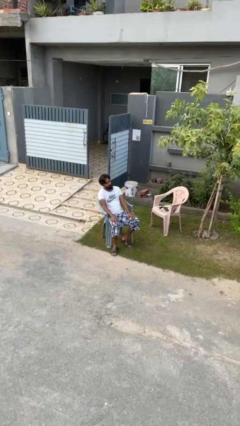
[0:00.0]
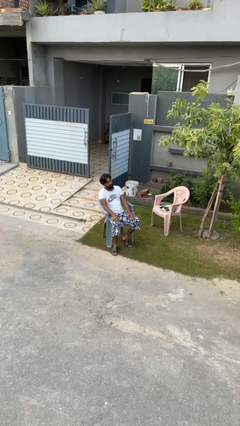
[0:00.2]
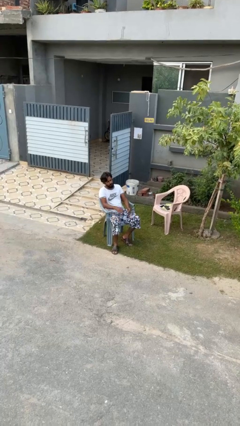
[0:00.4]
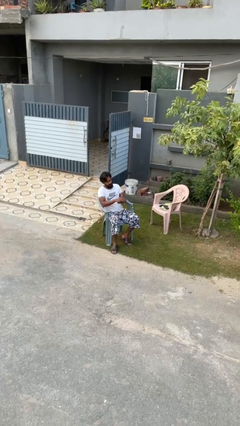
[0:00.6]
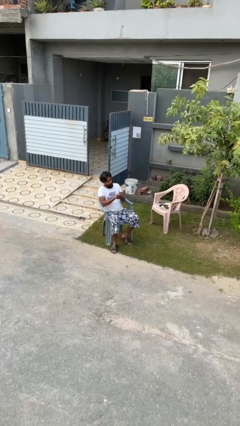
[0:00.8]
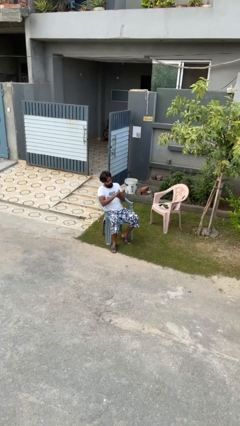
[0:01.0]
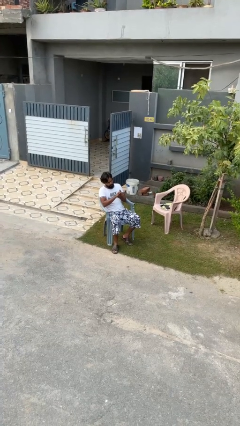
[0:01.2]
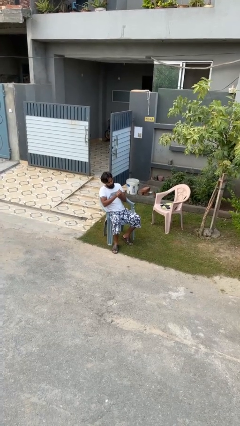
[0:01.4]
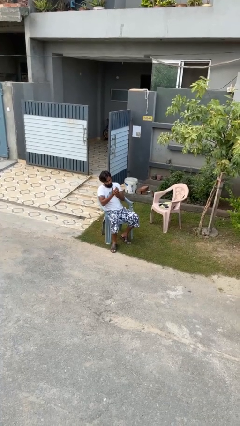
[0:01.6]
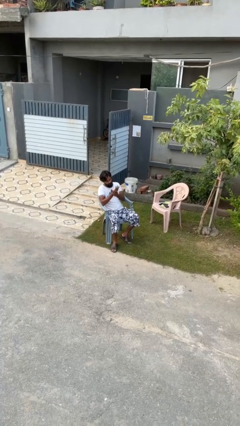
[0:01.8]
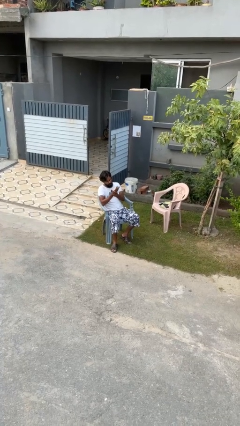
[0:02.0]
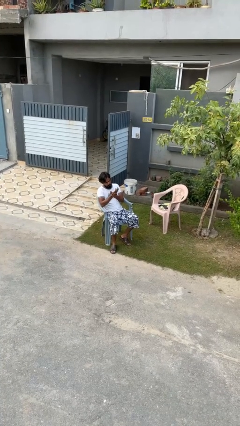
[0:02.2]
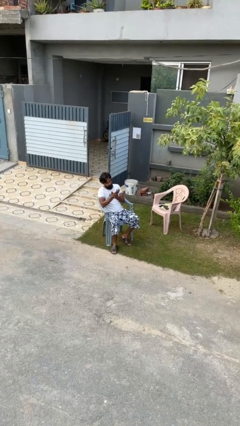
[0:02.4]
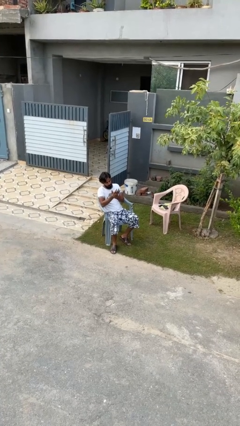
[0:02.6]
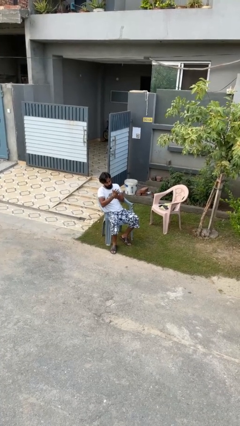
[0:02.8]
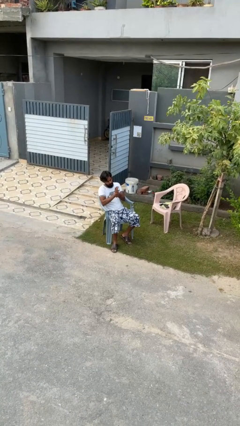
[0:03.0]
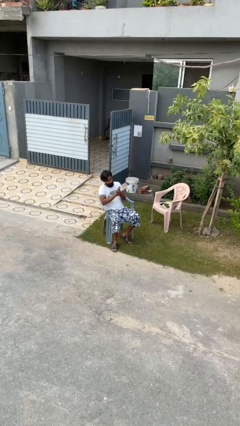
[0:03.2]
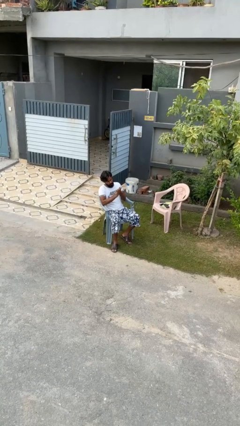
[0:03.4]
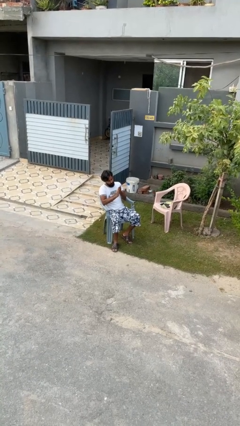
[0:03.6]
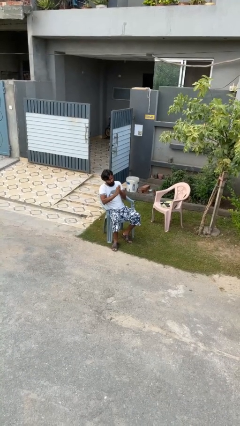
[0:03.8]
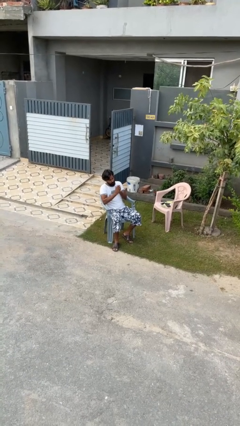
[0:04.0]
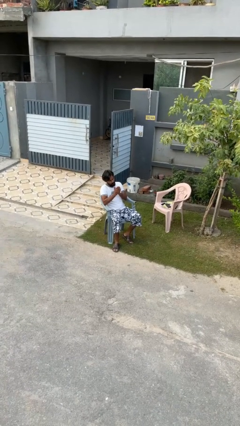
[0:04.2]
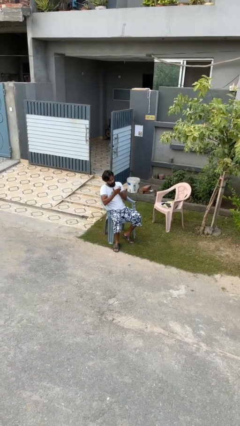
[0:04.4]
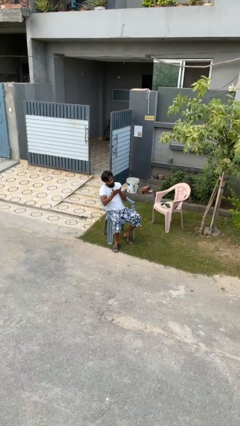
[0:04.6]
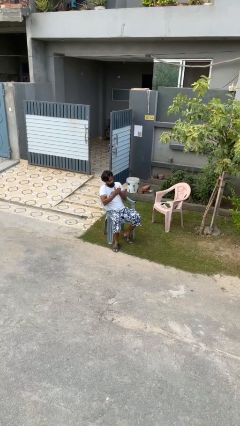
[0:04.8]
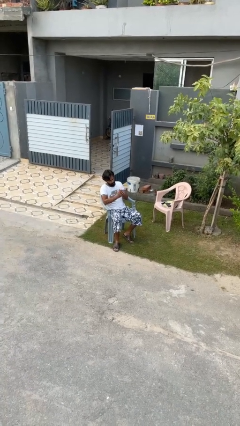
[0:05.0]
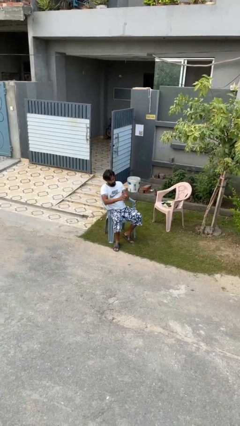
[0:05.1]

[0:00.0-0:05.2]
person looks at hands in lap

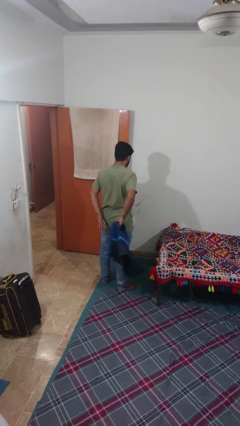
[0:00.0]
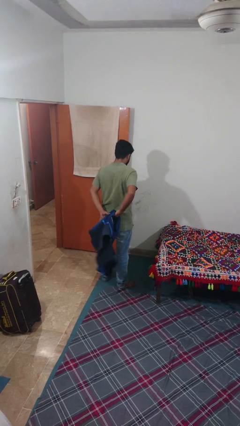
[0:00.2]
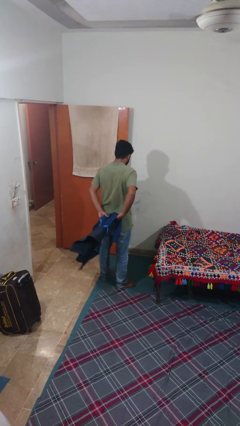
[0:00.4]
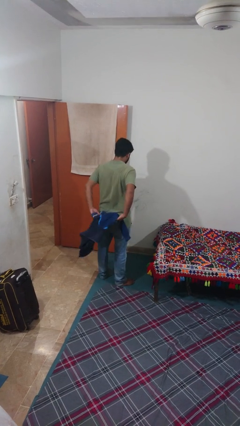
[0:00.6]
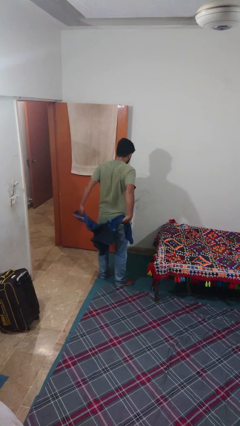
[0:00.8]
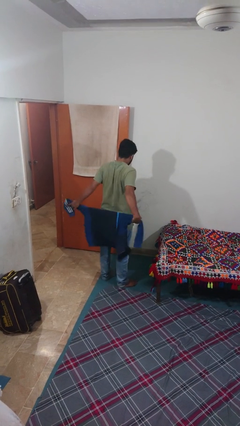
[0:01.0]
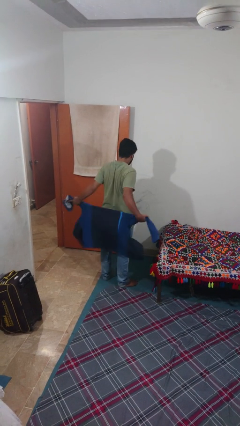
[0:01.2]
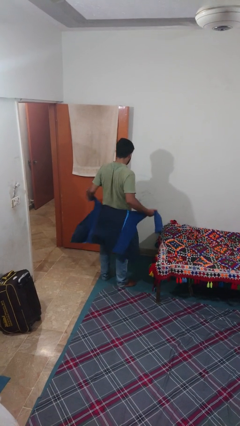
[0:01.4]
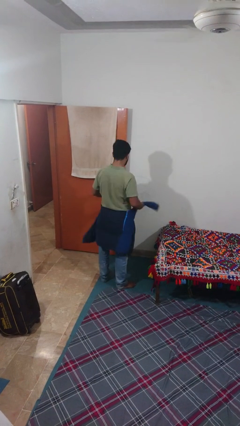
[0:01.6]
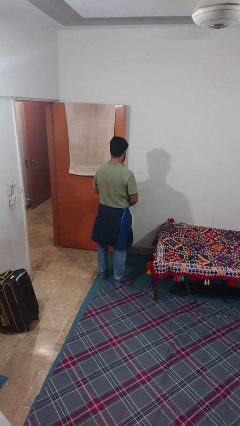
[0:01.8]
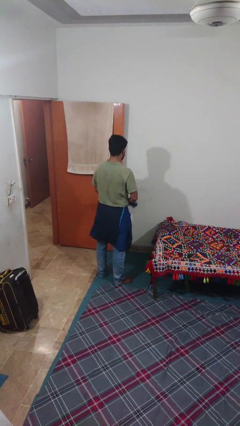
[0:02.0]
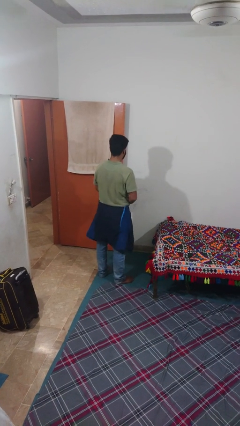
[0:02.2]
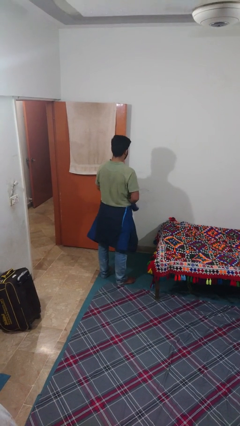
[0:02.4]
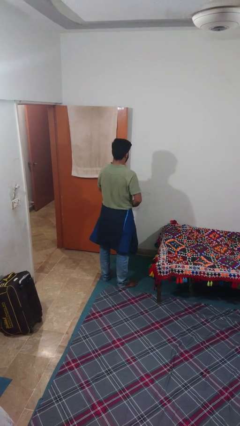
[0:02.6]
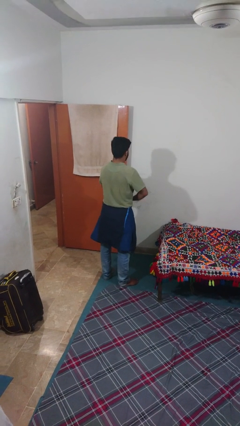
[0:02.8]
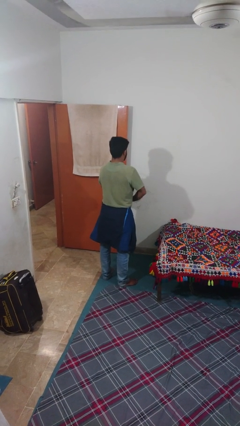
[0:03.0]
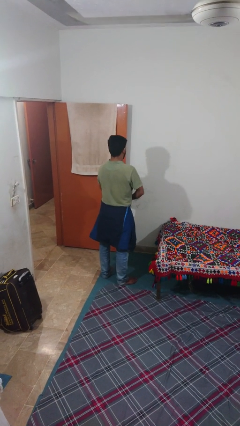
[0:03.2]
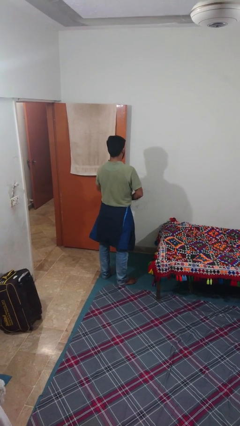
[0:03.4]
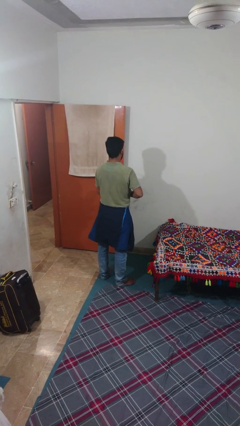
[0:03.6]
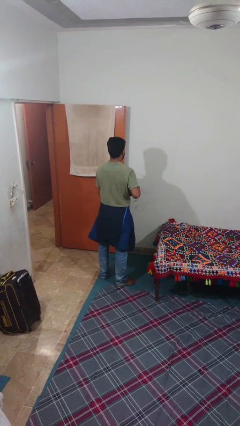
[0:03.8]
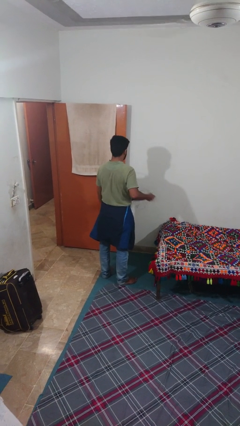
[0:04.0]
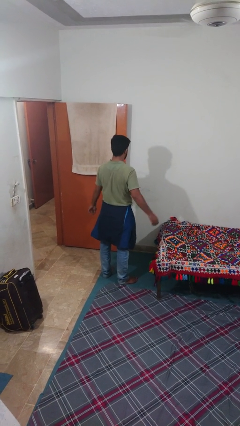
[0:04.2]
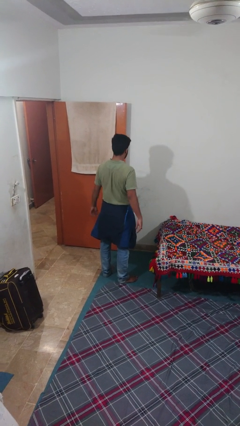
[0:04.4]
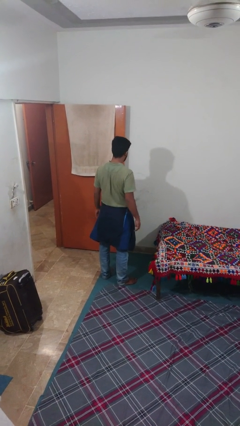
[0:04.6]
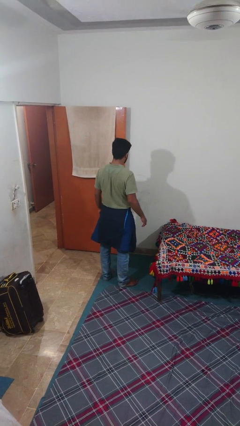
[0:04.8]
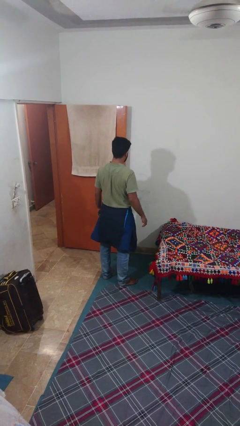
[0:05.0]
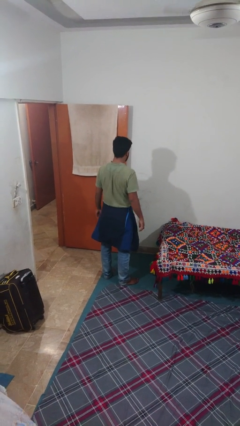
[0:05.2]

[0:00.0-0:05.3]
person ties jacket around waist

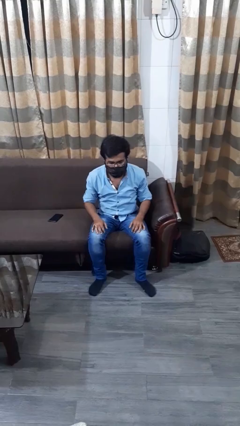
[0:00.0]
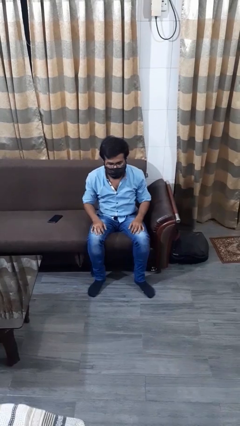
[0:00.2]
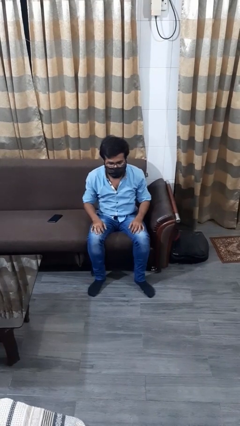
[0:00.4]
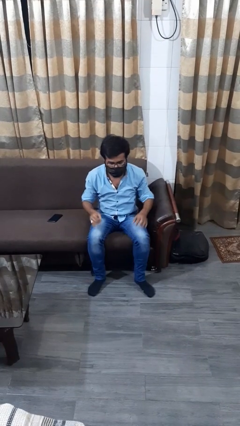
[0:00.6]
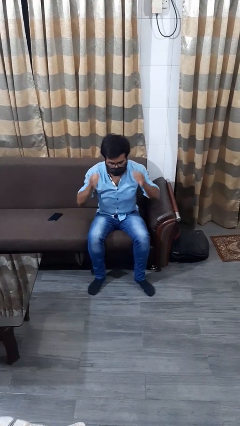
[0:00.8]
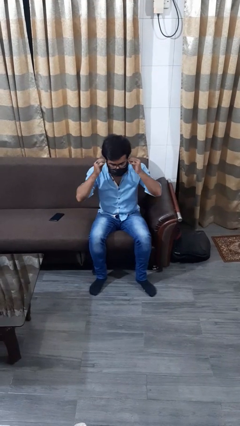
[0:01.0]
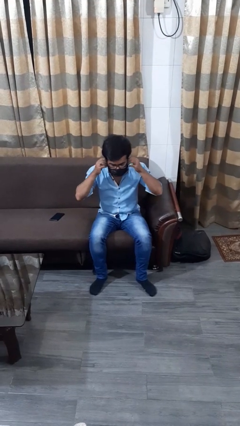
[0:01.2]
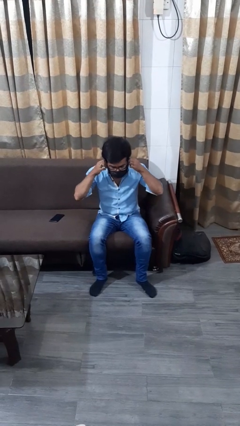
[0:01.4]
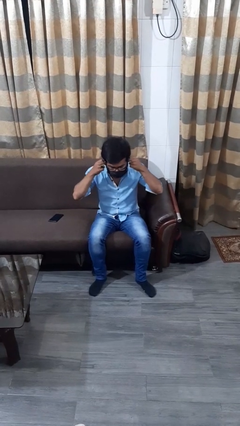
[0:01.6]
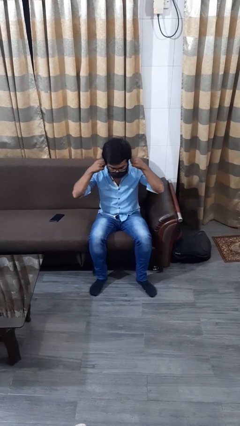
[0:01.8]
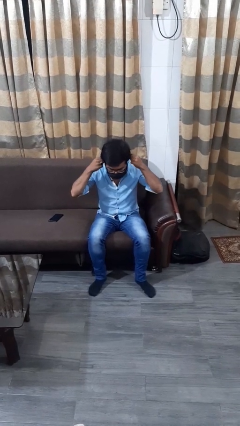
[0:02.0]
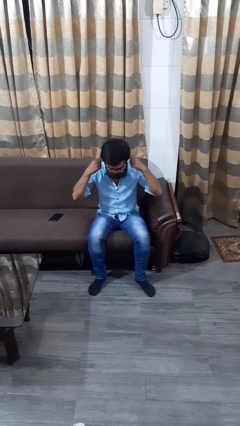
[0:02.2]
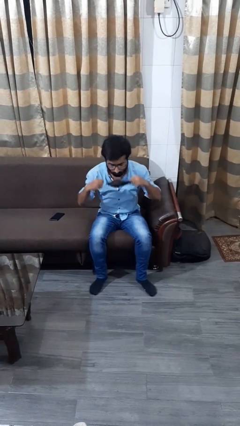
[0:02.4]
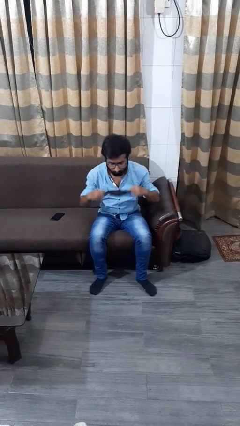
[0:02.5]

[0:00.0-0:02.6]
person takes off facemask

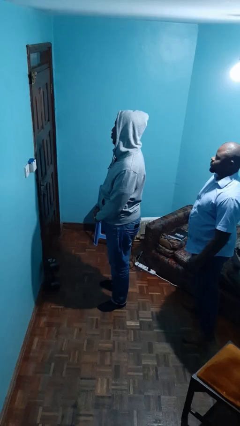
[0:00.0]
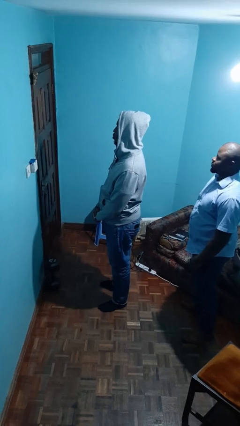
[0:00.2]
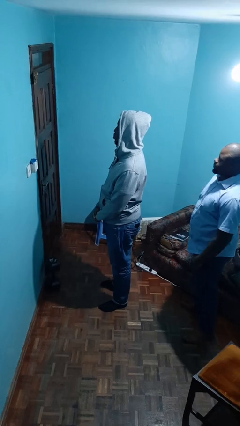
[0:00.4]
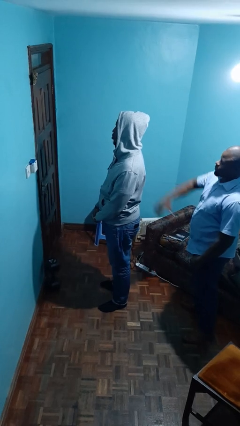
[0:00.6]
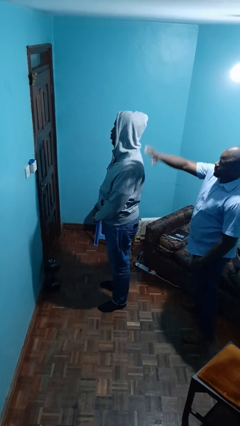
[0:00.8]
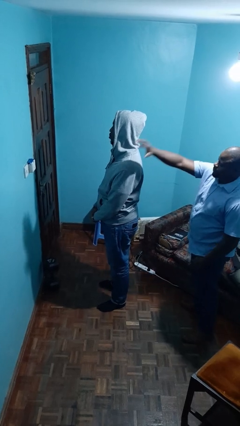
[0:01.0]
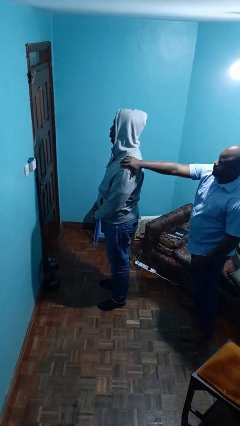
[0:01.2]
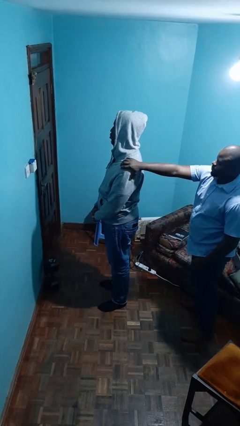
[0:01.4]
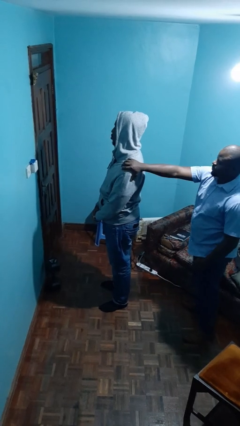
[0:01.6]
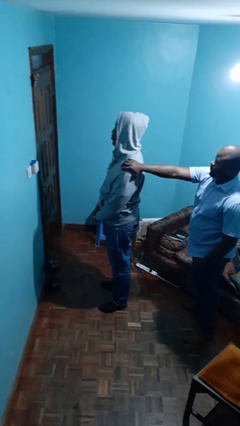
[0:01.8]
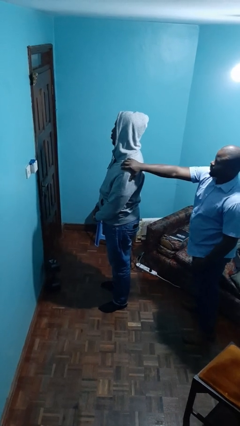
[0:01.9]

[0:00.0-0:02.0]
person grabs person by shoulder

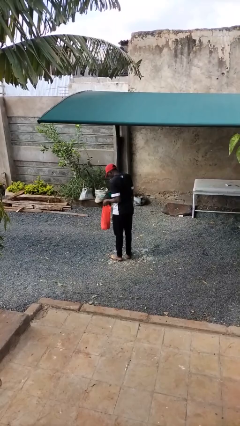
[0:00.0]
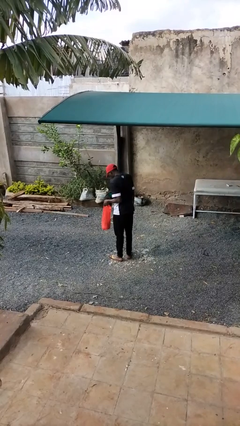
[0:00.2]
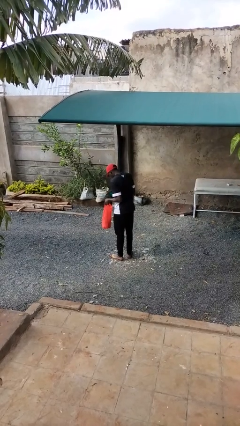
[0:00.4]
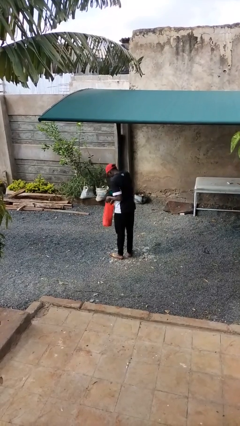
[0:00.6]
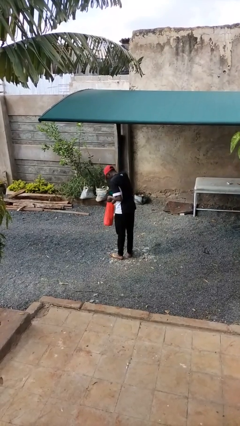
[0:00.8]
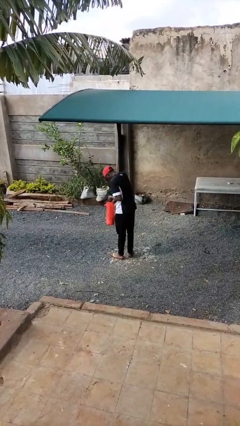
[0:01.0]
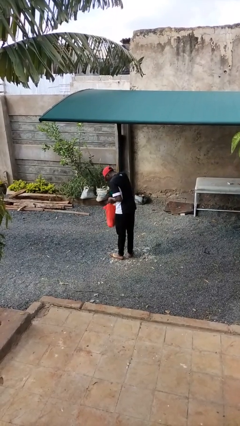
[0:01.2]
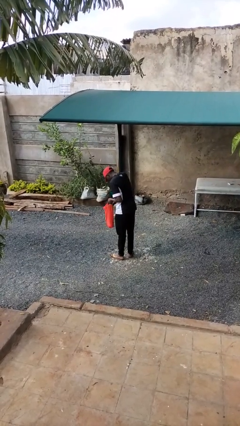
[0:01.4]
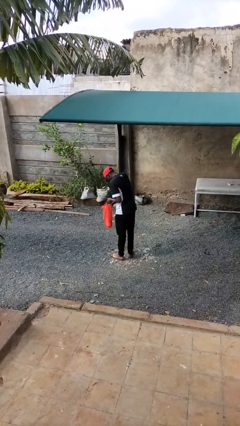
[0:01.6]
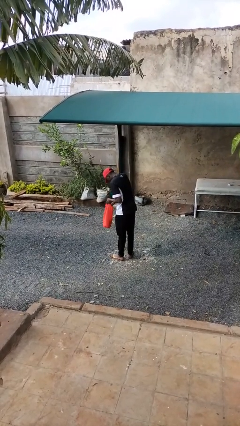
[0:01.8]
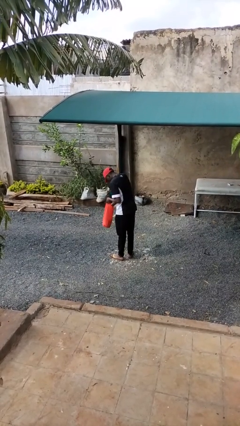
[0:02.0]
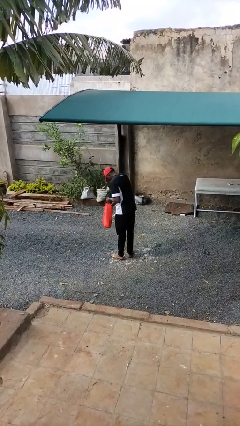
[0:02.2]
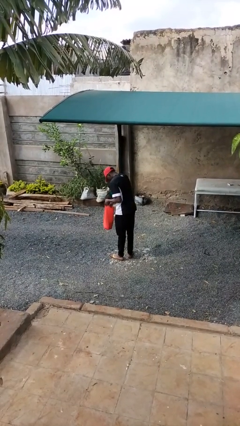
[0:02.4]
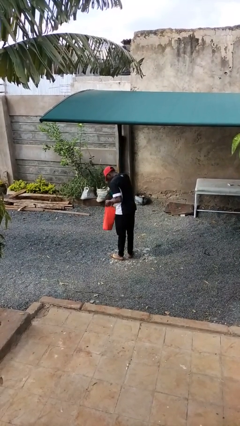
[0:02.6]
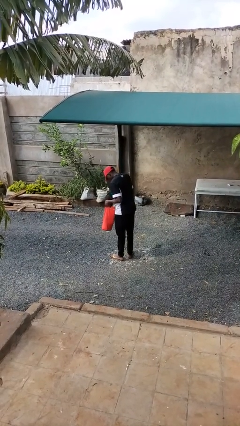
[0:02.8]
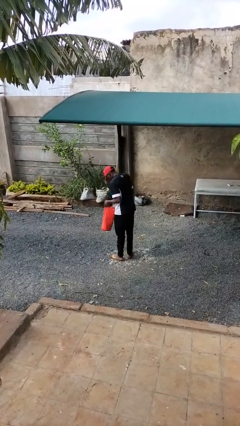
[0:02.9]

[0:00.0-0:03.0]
person searches in bag
